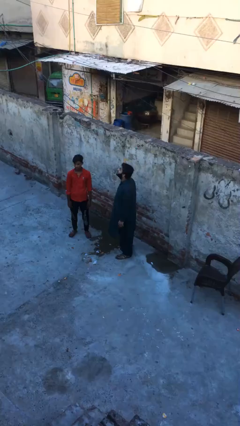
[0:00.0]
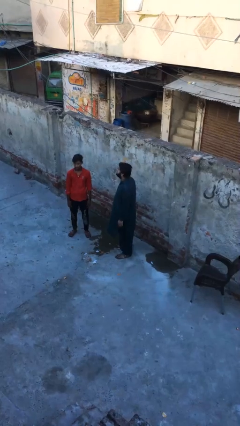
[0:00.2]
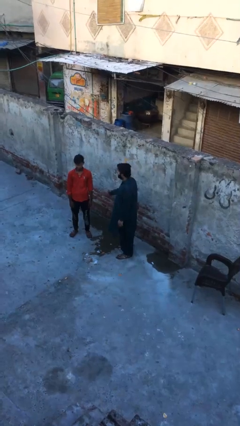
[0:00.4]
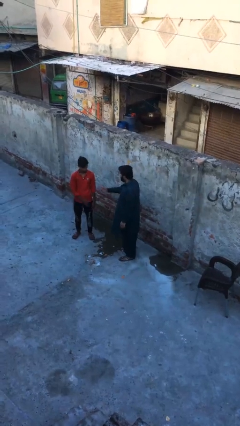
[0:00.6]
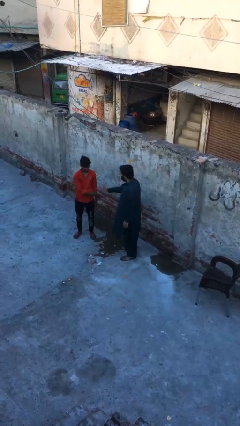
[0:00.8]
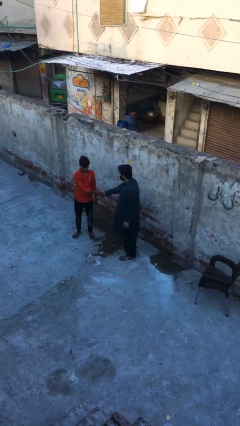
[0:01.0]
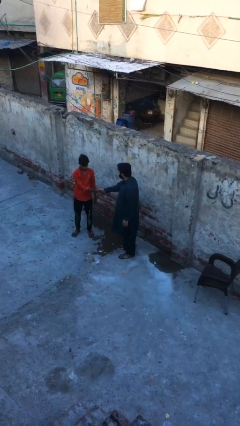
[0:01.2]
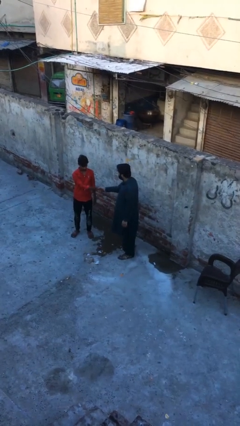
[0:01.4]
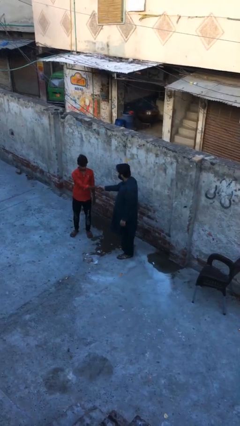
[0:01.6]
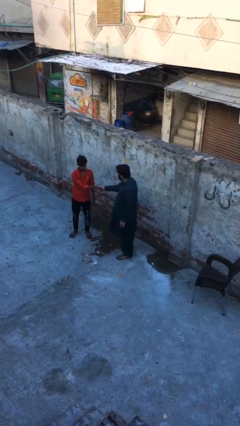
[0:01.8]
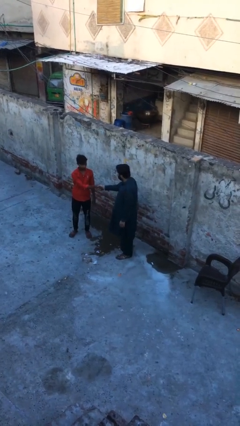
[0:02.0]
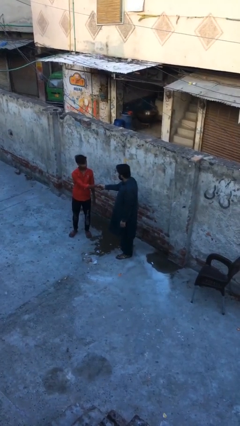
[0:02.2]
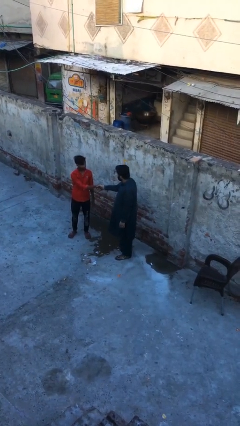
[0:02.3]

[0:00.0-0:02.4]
person shakes hand

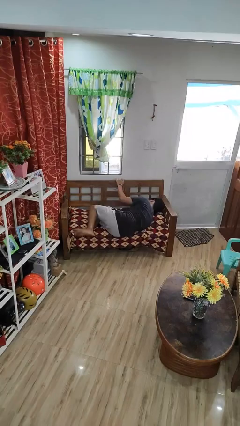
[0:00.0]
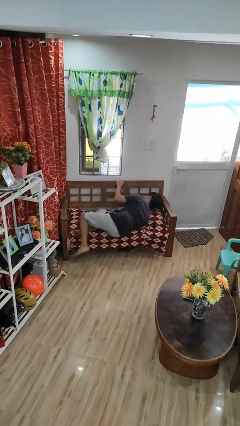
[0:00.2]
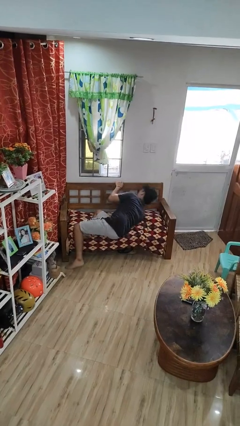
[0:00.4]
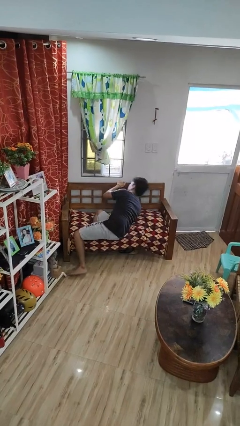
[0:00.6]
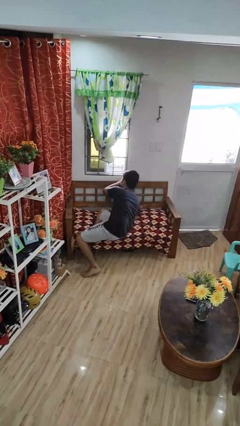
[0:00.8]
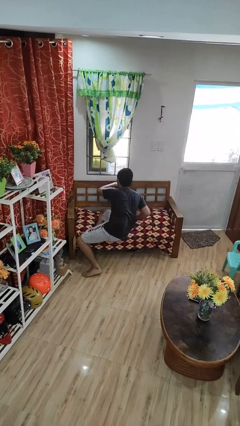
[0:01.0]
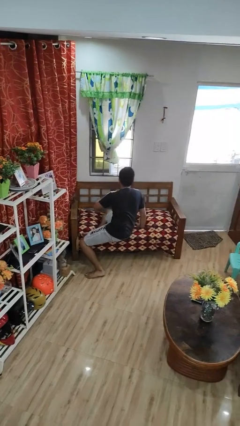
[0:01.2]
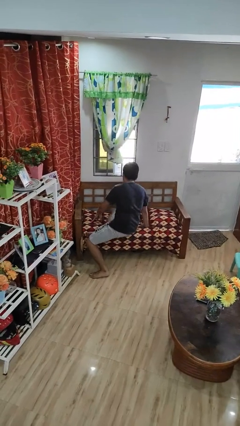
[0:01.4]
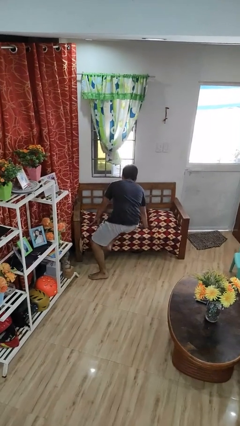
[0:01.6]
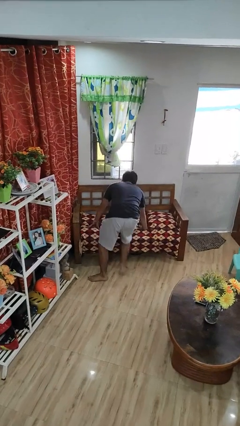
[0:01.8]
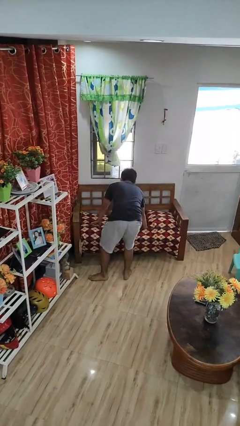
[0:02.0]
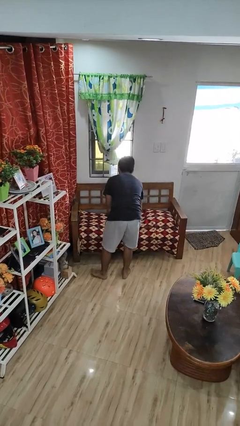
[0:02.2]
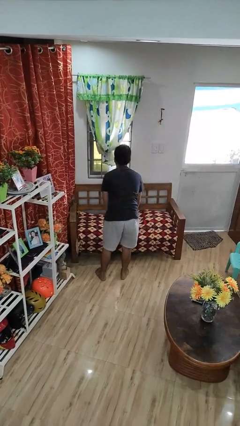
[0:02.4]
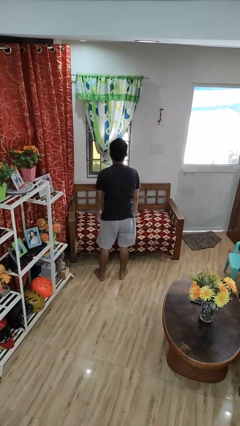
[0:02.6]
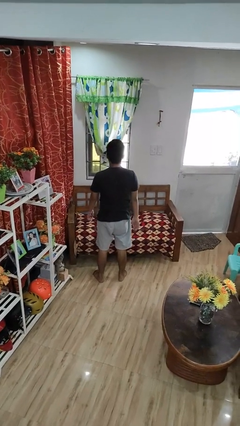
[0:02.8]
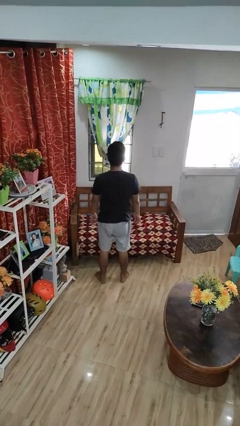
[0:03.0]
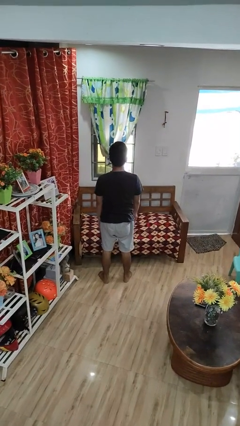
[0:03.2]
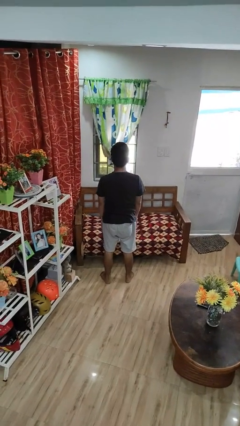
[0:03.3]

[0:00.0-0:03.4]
person stands up

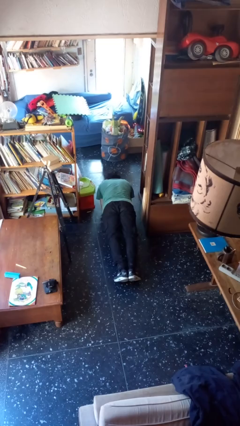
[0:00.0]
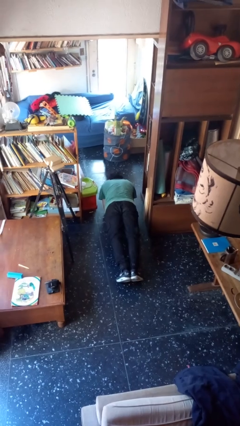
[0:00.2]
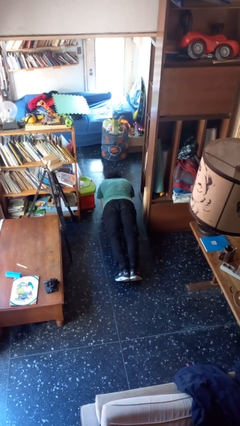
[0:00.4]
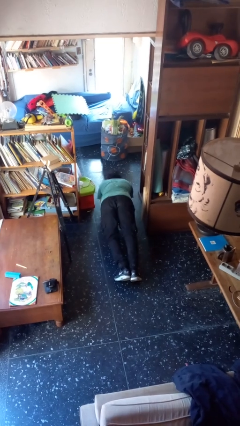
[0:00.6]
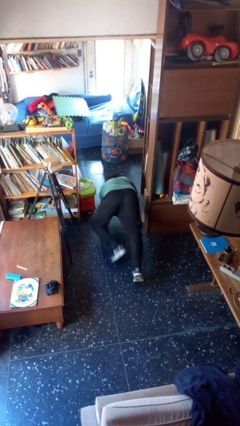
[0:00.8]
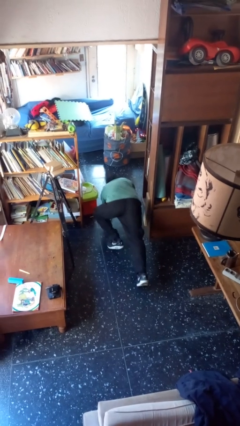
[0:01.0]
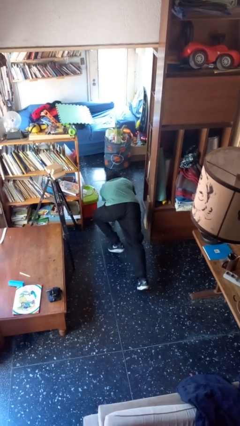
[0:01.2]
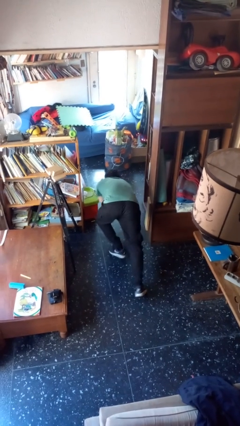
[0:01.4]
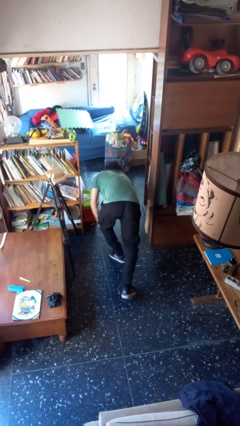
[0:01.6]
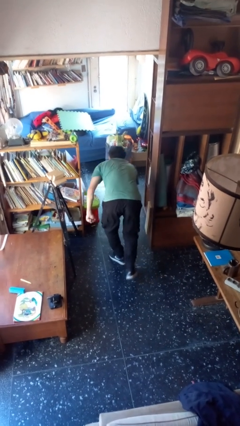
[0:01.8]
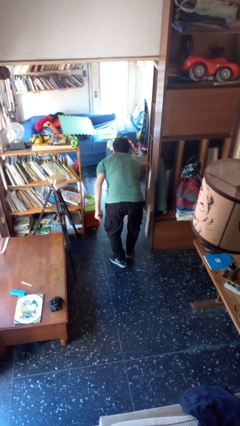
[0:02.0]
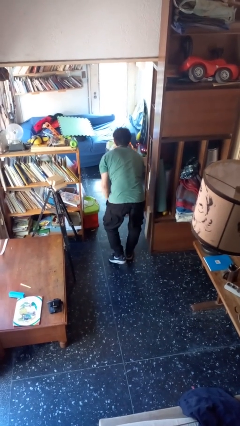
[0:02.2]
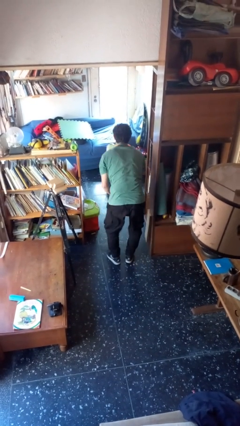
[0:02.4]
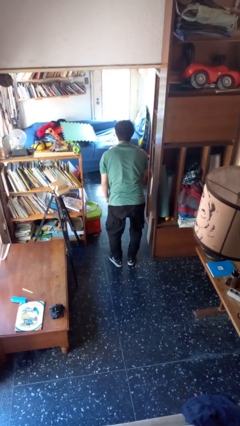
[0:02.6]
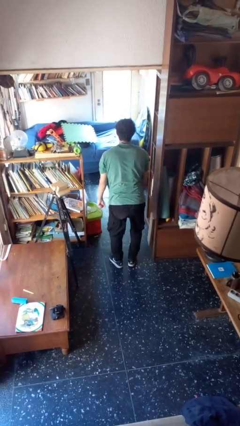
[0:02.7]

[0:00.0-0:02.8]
person stands up from floor

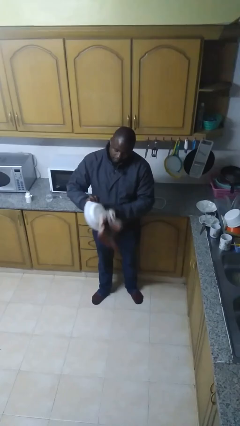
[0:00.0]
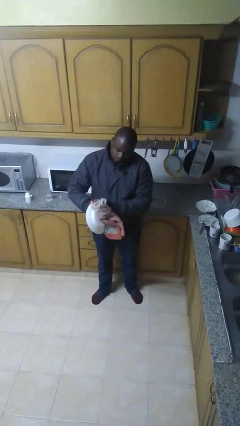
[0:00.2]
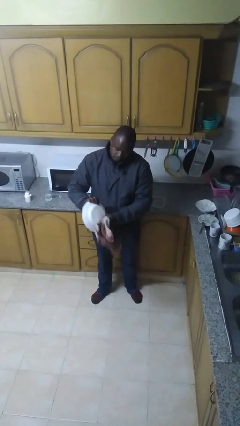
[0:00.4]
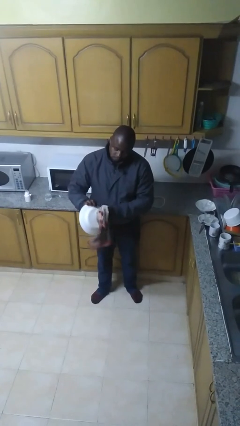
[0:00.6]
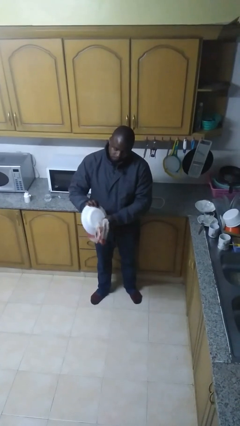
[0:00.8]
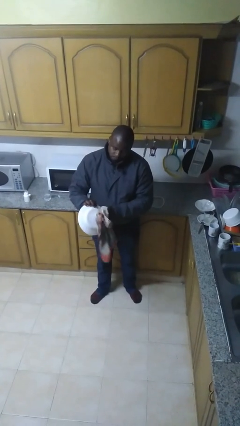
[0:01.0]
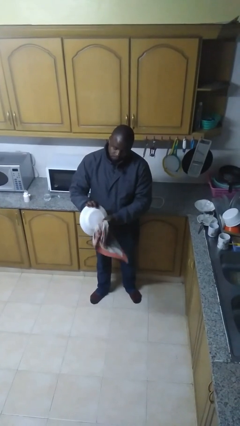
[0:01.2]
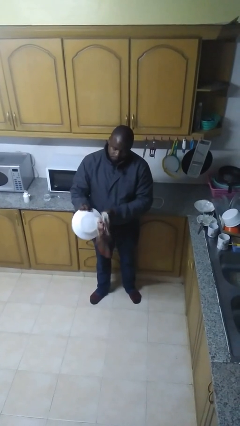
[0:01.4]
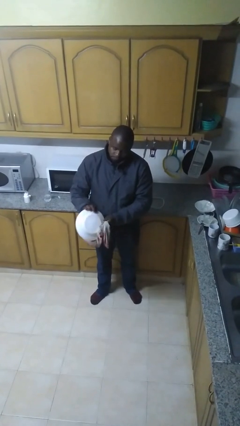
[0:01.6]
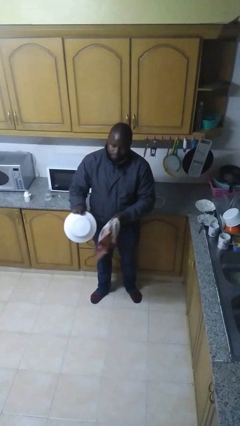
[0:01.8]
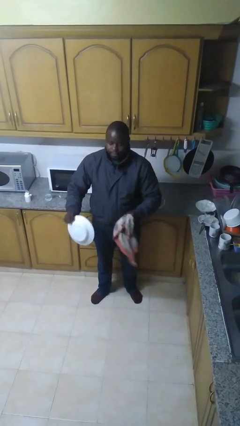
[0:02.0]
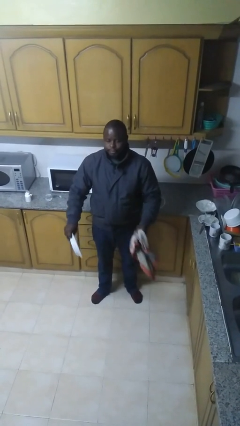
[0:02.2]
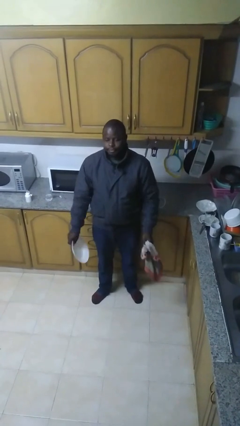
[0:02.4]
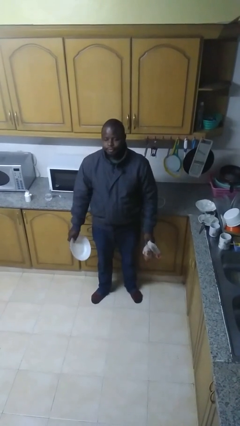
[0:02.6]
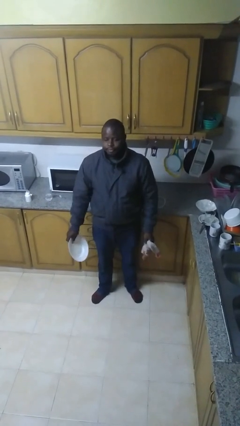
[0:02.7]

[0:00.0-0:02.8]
person dries dish

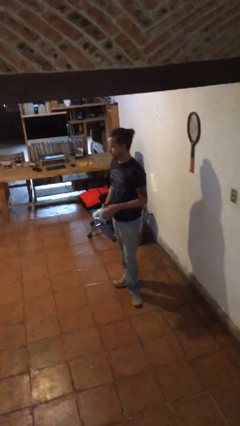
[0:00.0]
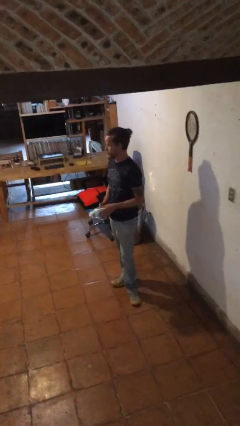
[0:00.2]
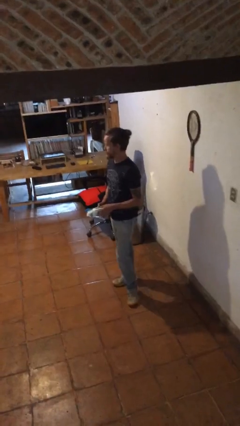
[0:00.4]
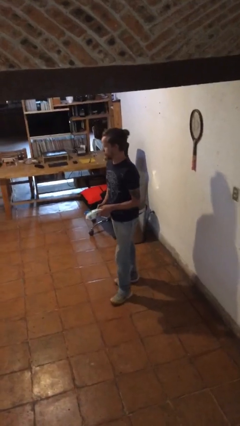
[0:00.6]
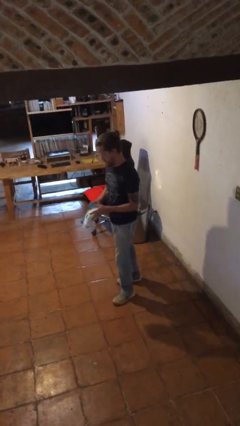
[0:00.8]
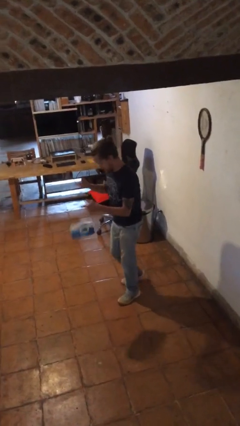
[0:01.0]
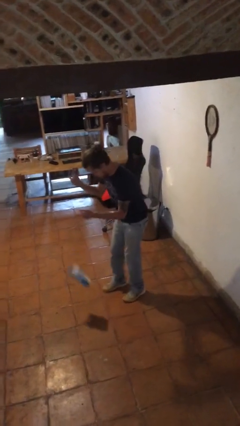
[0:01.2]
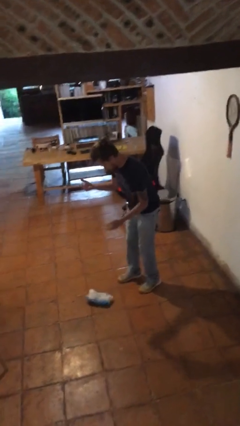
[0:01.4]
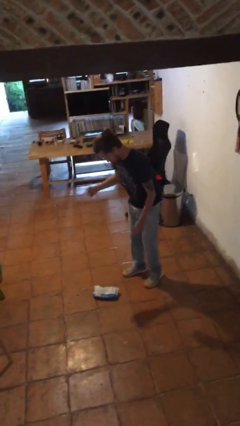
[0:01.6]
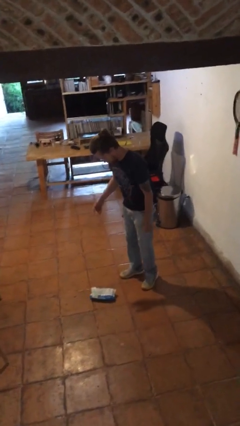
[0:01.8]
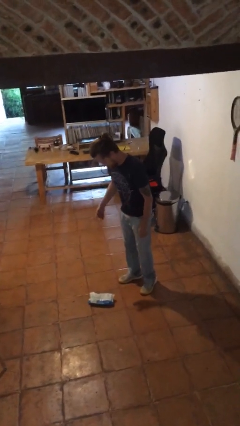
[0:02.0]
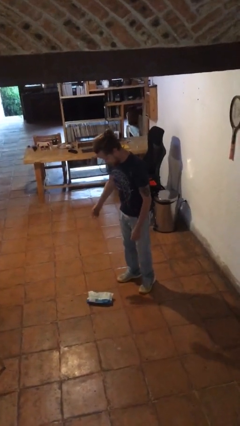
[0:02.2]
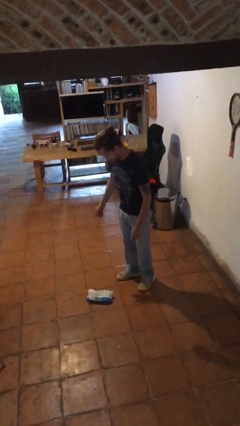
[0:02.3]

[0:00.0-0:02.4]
person drops object

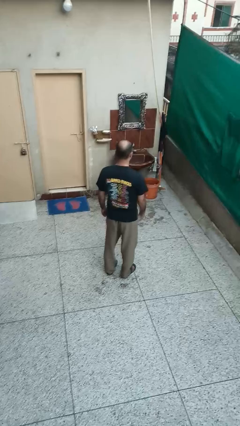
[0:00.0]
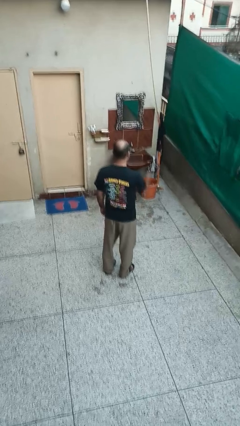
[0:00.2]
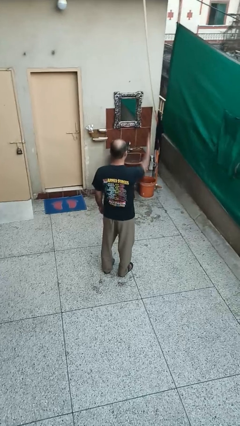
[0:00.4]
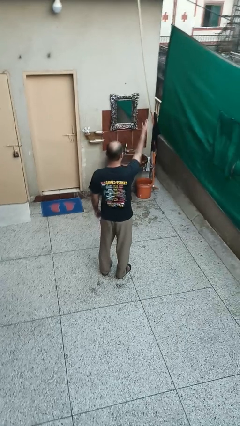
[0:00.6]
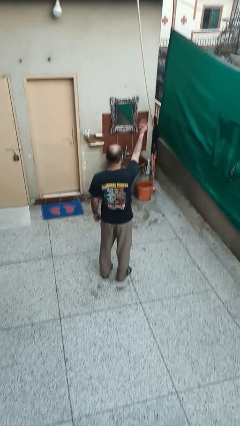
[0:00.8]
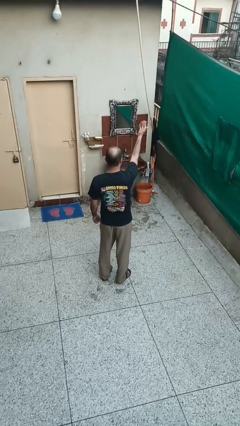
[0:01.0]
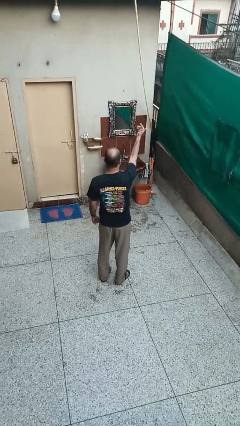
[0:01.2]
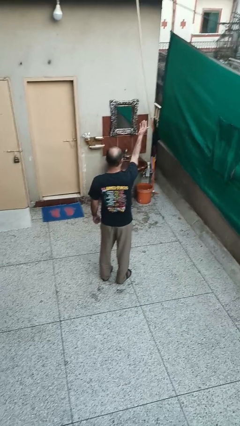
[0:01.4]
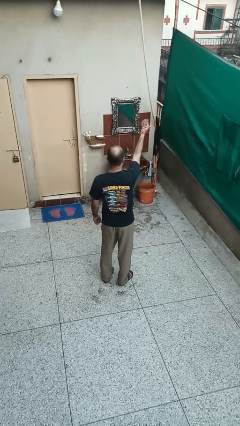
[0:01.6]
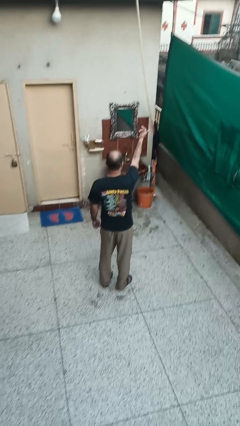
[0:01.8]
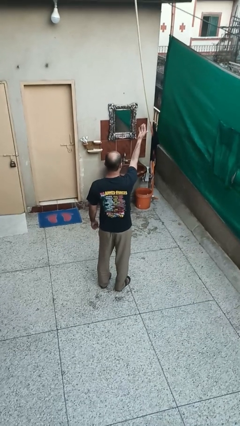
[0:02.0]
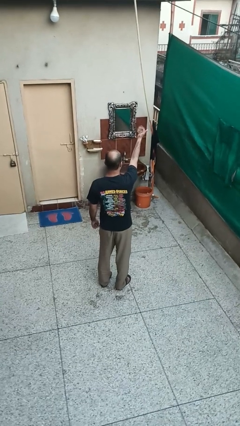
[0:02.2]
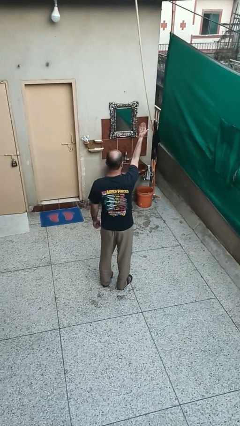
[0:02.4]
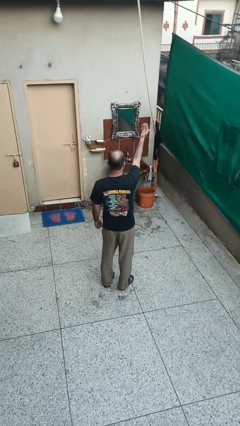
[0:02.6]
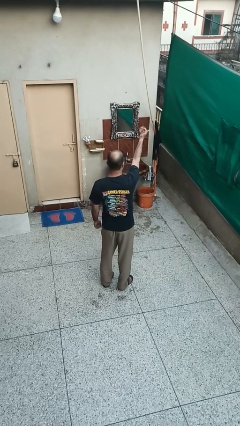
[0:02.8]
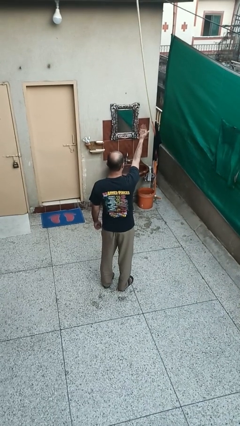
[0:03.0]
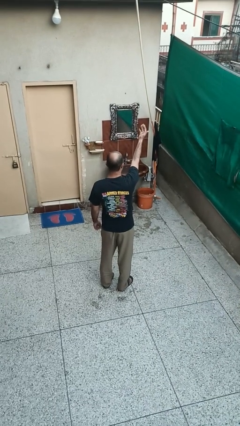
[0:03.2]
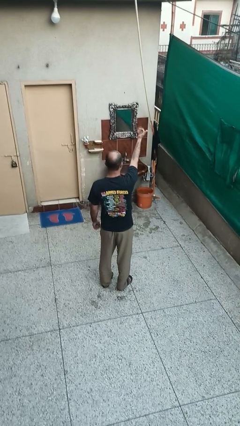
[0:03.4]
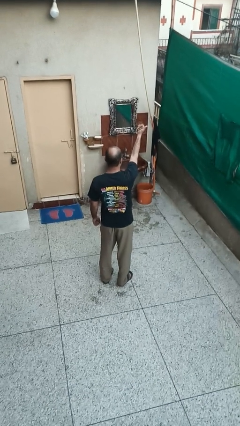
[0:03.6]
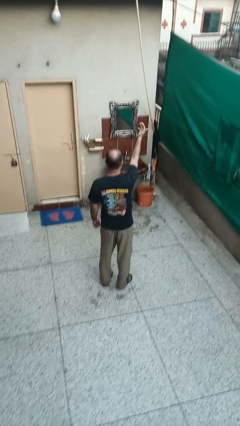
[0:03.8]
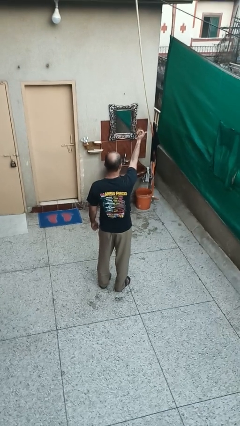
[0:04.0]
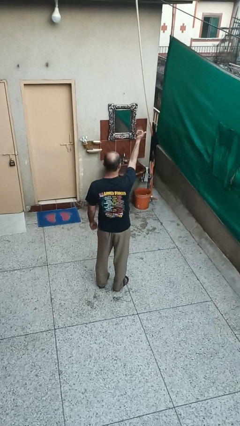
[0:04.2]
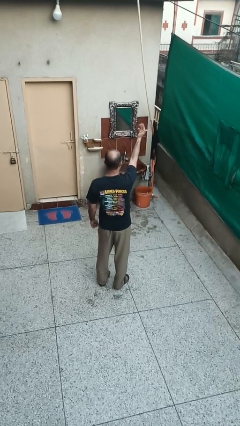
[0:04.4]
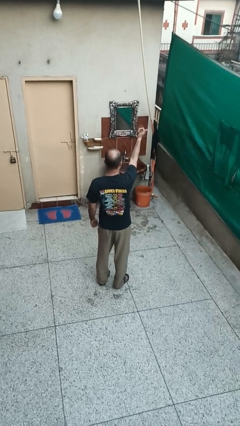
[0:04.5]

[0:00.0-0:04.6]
person gestures come here
